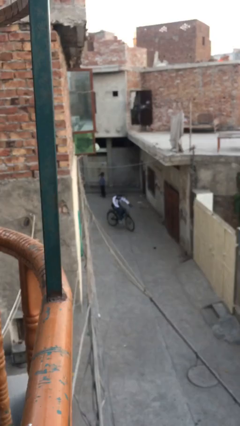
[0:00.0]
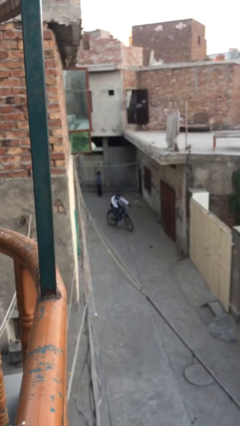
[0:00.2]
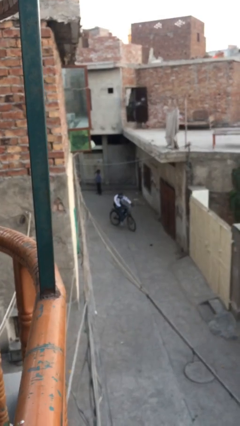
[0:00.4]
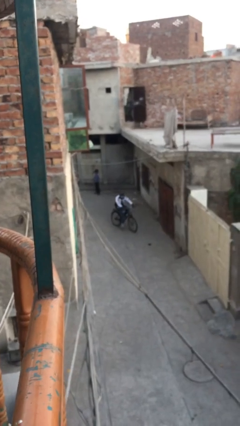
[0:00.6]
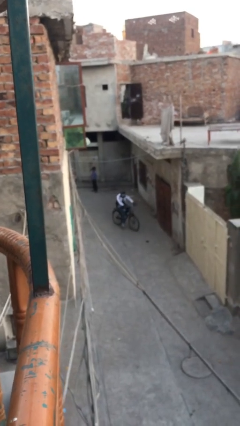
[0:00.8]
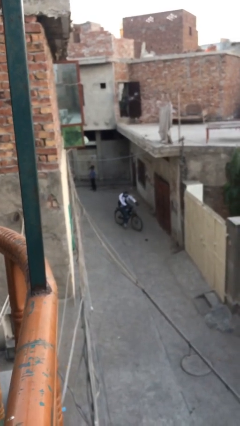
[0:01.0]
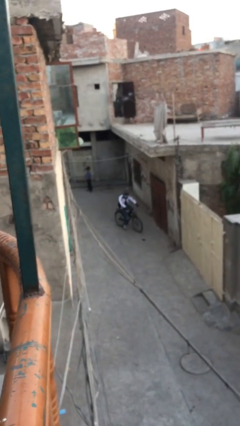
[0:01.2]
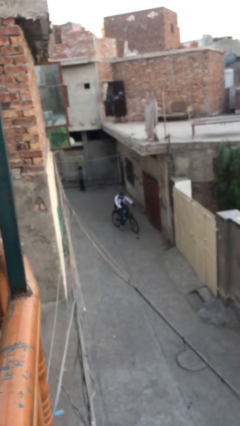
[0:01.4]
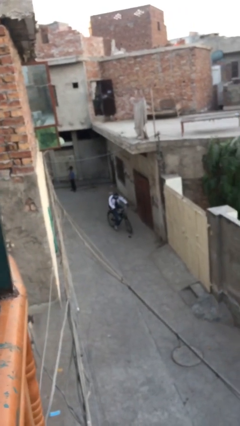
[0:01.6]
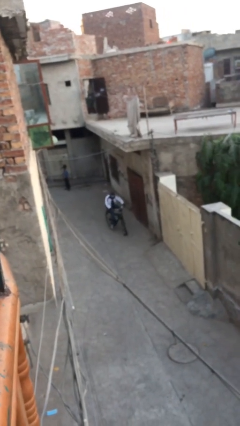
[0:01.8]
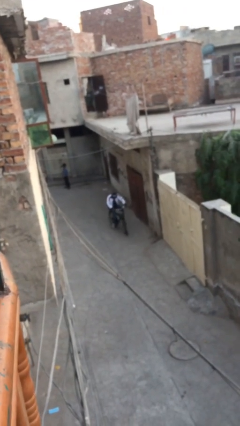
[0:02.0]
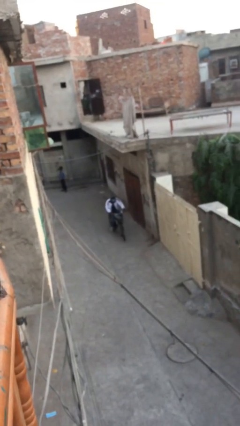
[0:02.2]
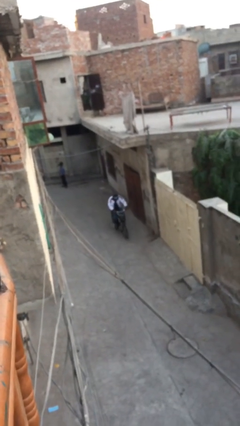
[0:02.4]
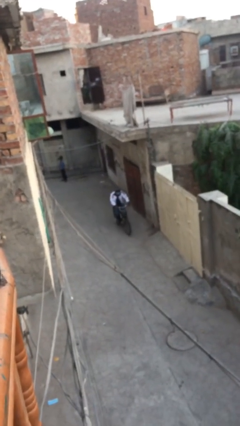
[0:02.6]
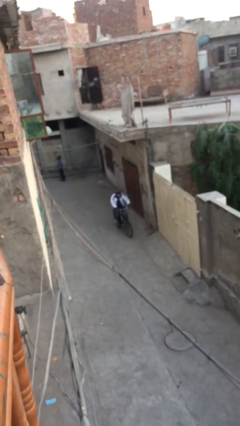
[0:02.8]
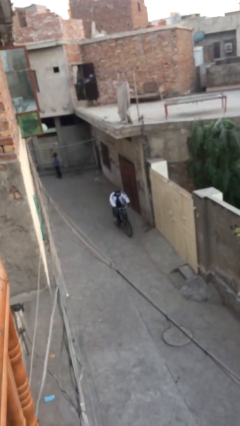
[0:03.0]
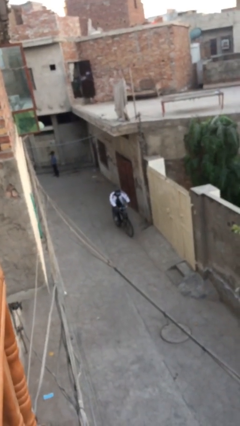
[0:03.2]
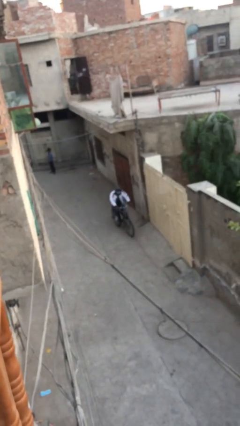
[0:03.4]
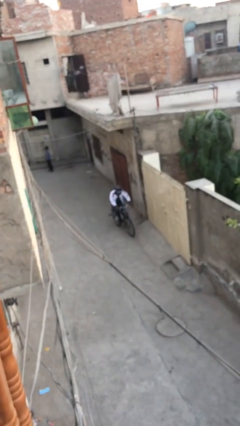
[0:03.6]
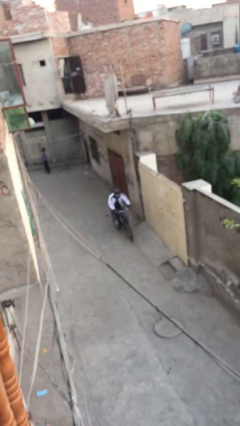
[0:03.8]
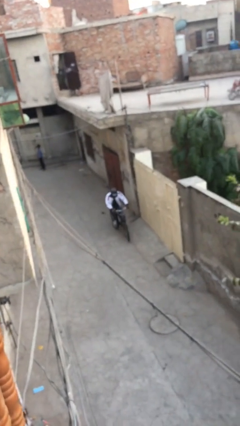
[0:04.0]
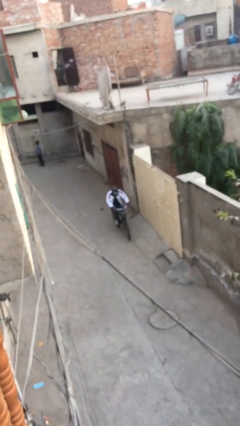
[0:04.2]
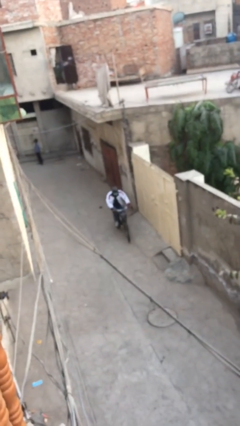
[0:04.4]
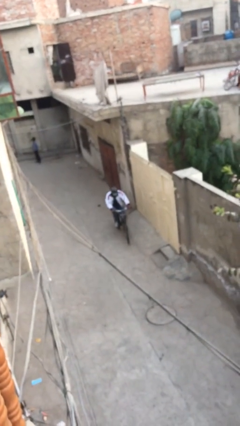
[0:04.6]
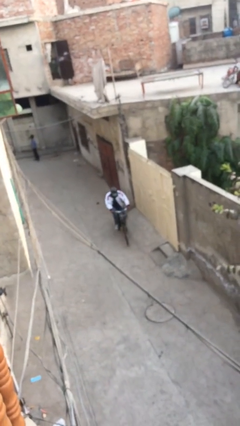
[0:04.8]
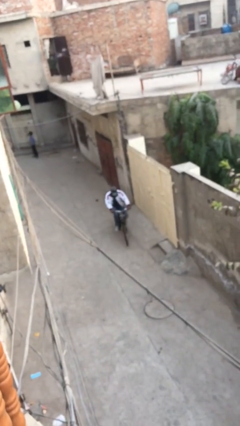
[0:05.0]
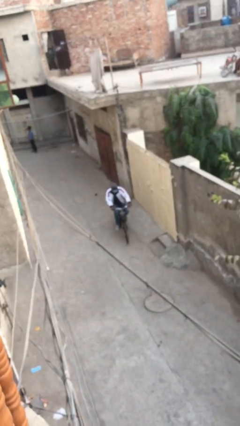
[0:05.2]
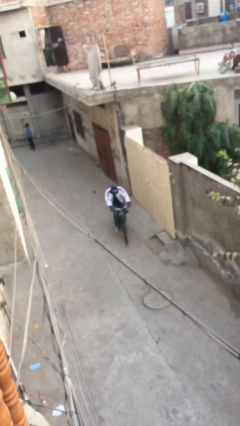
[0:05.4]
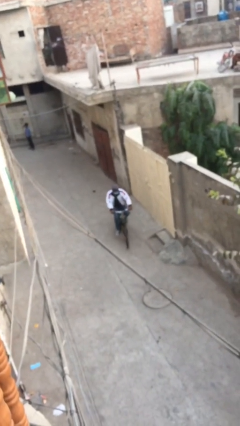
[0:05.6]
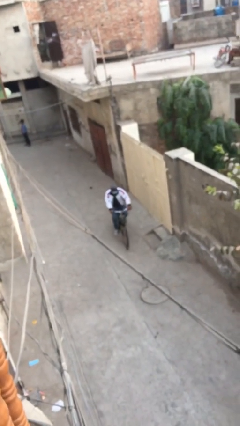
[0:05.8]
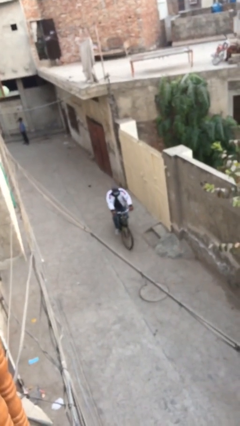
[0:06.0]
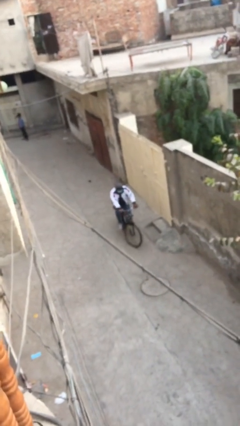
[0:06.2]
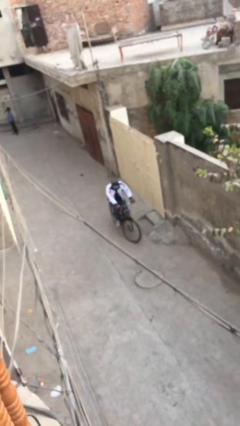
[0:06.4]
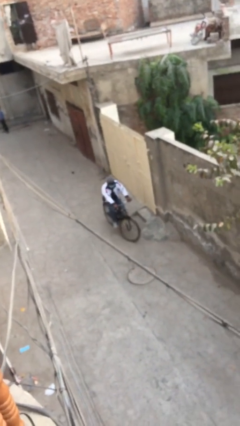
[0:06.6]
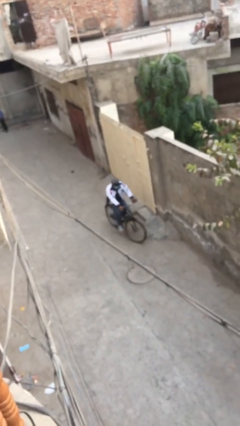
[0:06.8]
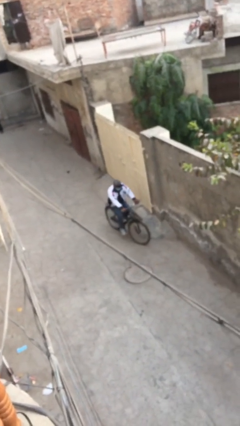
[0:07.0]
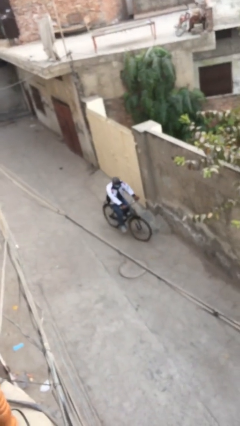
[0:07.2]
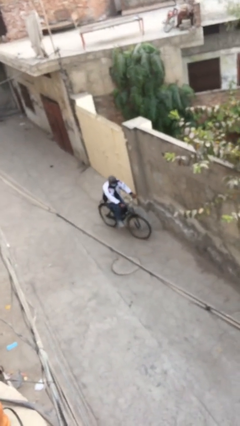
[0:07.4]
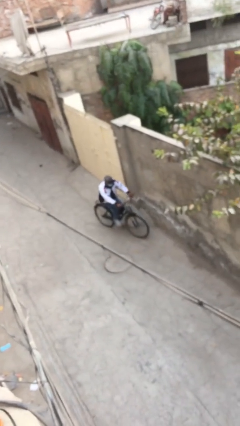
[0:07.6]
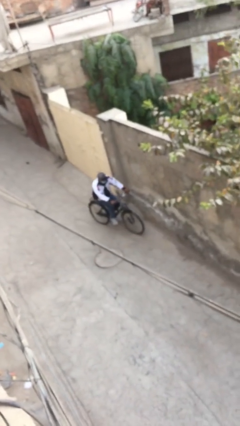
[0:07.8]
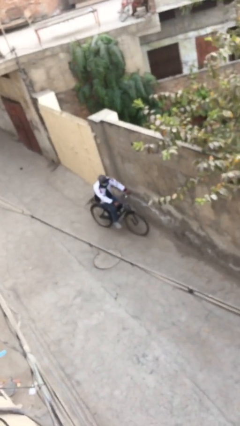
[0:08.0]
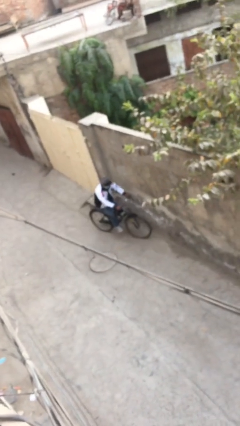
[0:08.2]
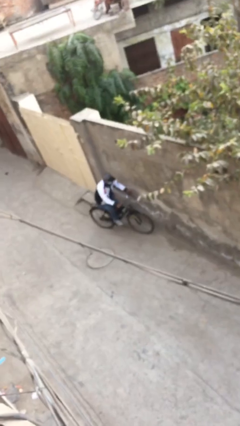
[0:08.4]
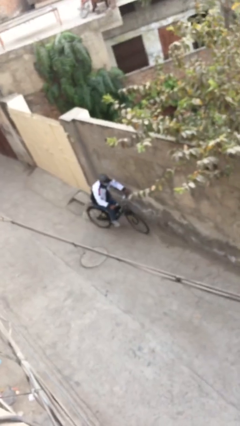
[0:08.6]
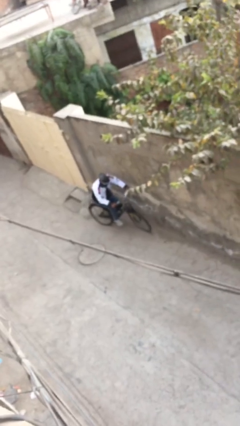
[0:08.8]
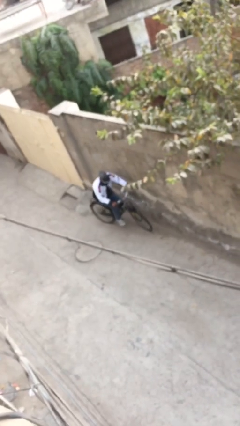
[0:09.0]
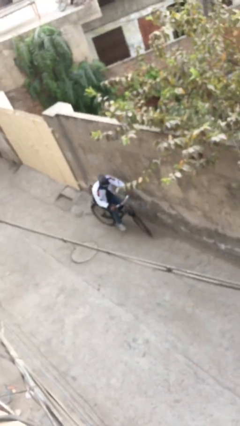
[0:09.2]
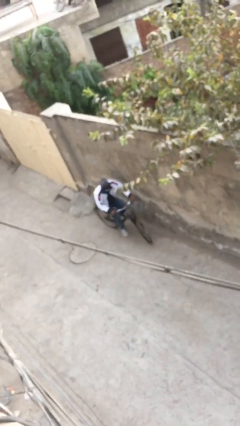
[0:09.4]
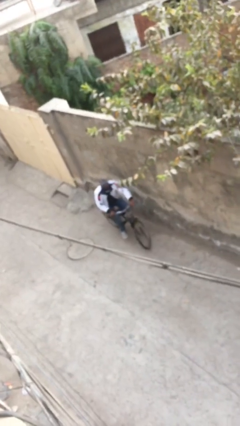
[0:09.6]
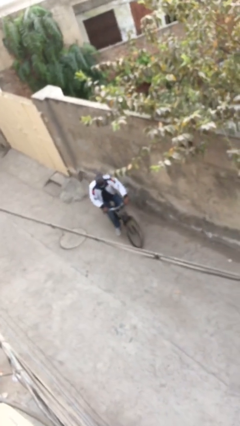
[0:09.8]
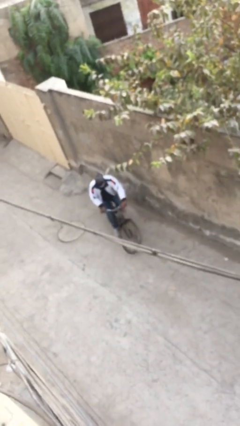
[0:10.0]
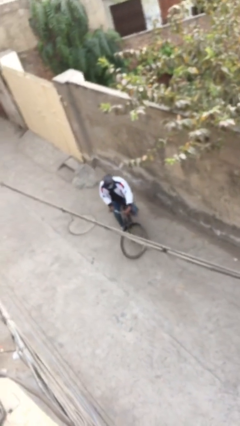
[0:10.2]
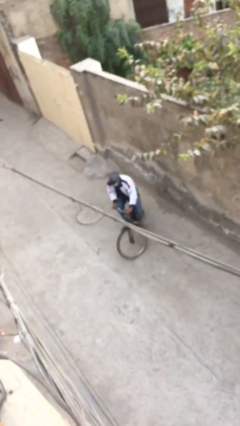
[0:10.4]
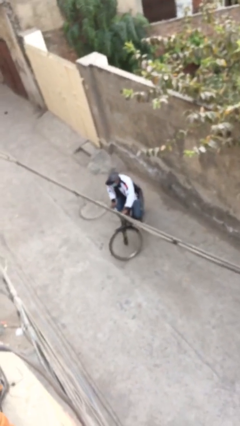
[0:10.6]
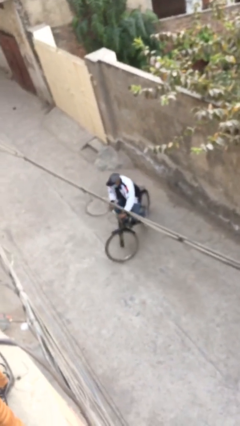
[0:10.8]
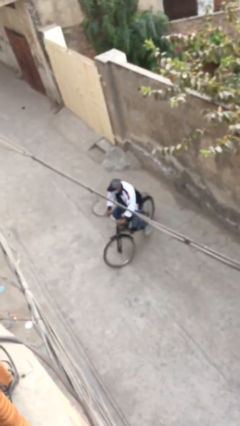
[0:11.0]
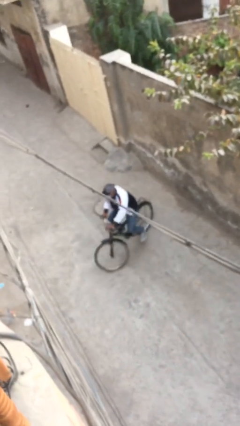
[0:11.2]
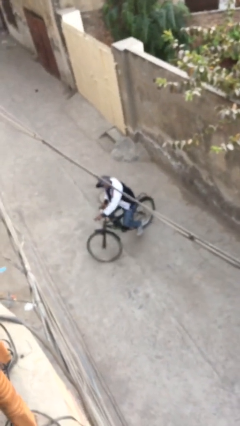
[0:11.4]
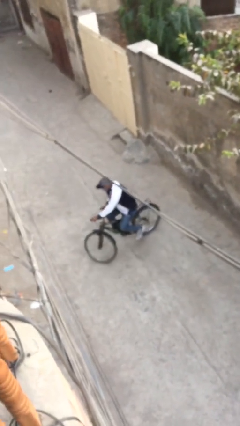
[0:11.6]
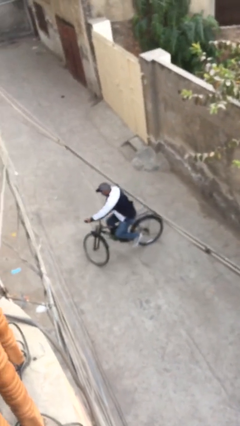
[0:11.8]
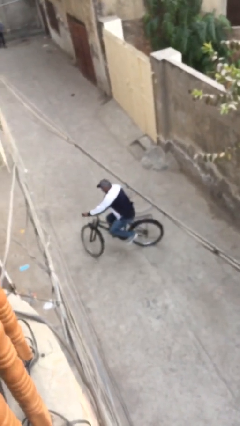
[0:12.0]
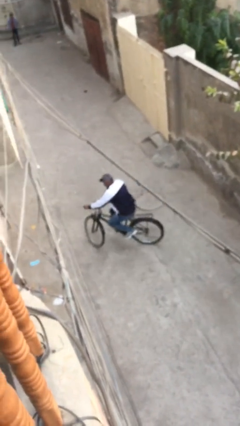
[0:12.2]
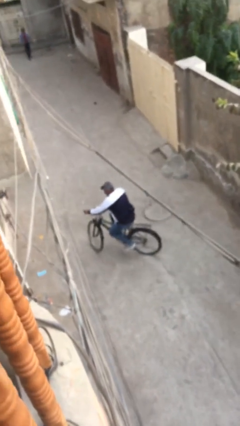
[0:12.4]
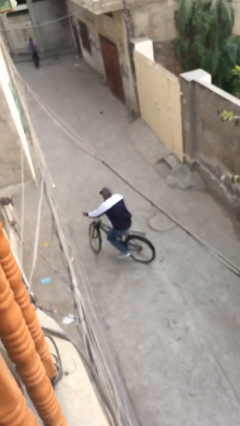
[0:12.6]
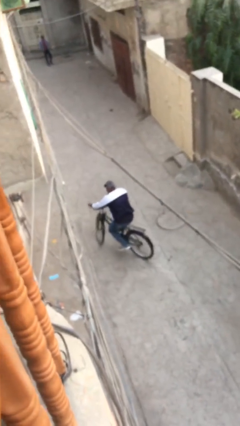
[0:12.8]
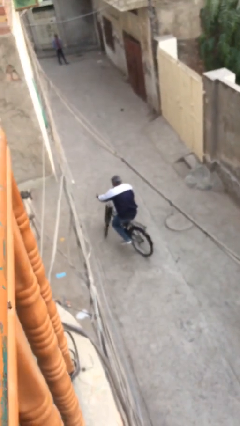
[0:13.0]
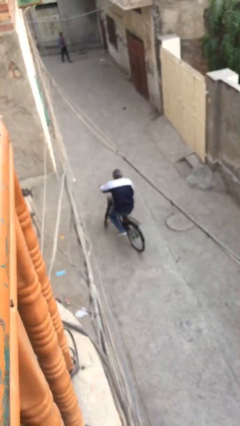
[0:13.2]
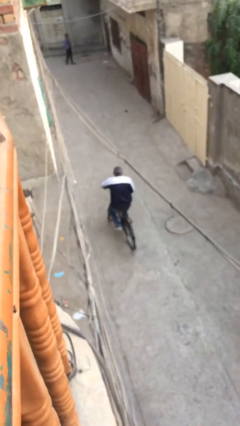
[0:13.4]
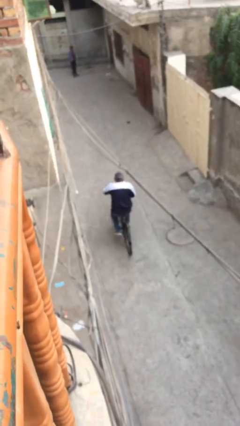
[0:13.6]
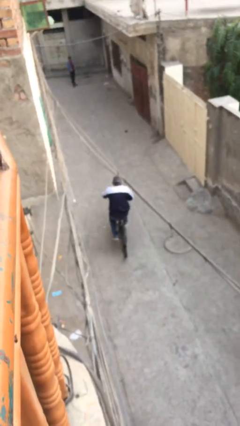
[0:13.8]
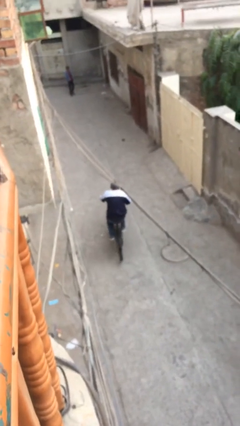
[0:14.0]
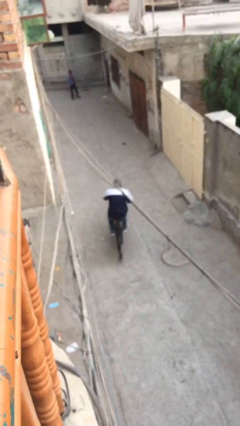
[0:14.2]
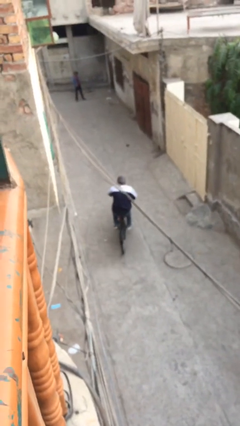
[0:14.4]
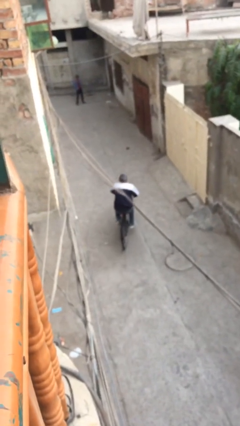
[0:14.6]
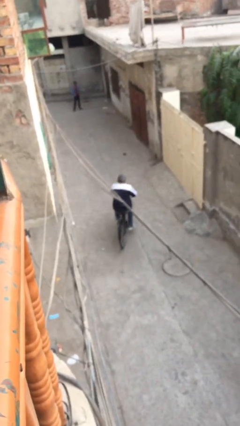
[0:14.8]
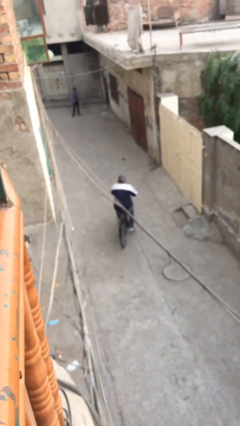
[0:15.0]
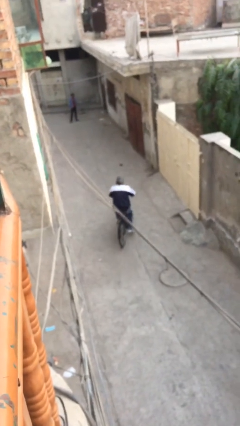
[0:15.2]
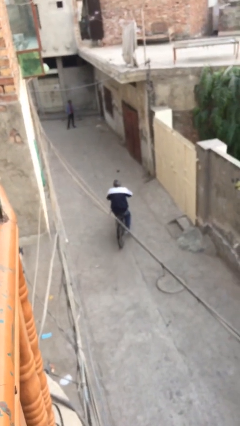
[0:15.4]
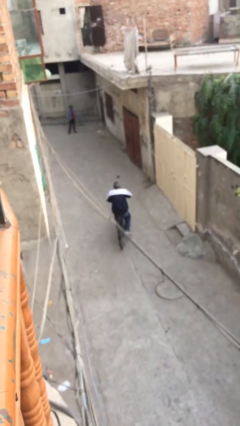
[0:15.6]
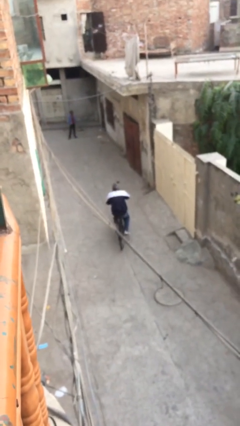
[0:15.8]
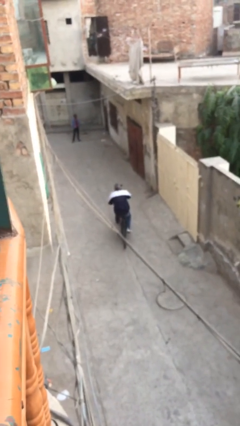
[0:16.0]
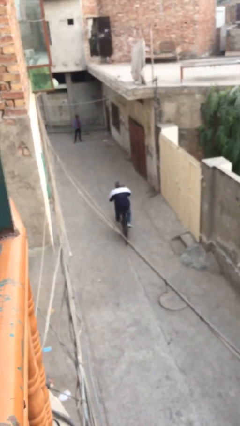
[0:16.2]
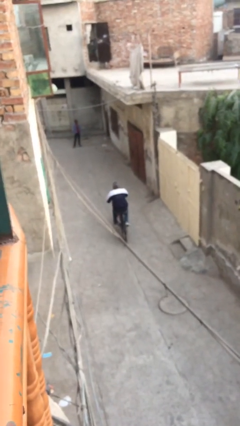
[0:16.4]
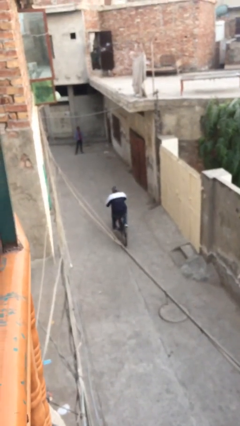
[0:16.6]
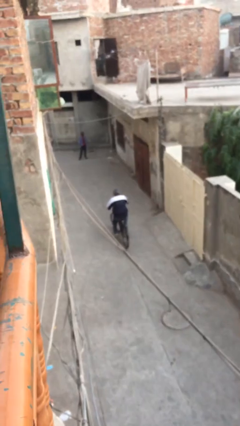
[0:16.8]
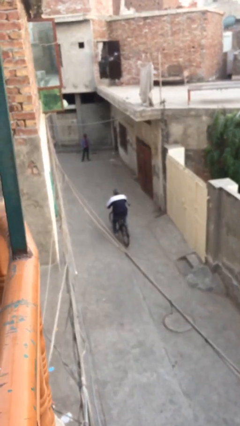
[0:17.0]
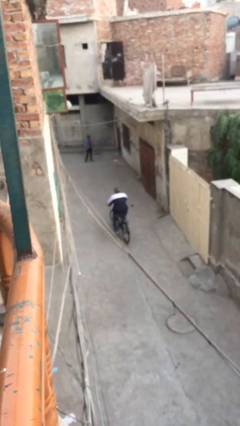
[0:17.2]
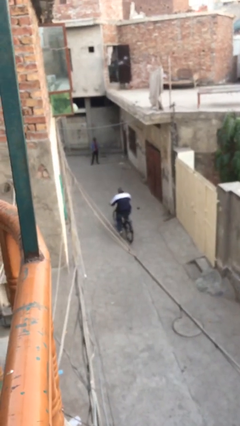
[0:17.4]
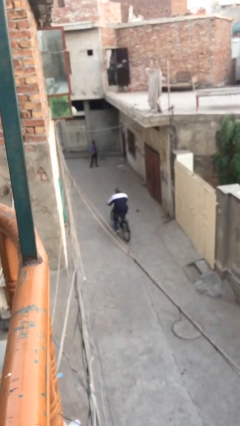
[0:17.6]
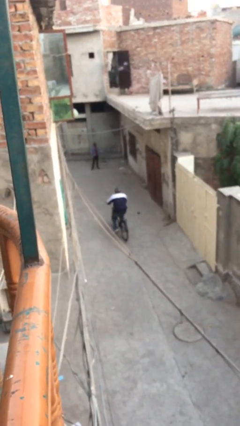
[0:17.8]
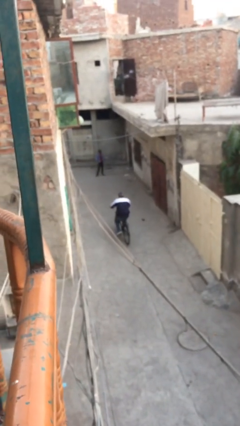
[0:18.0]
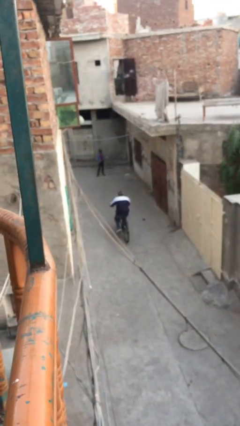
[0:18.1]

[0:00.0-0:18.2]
person rides bicycle
